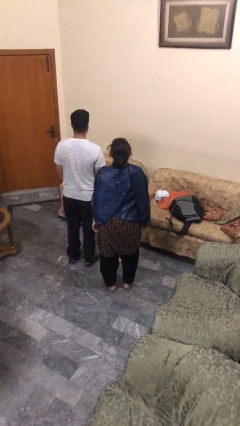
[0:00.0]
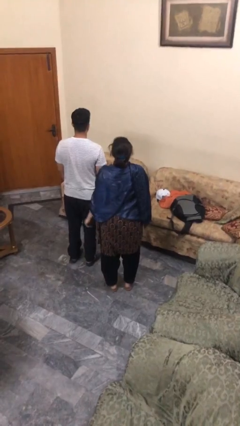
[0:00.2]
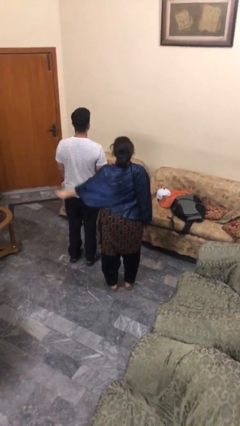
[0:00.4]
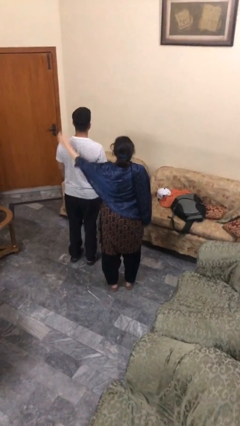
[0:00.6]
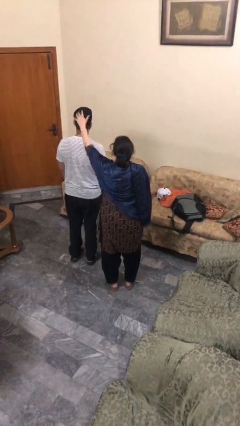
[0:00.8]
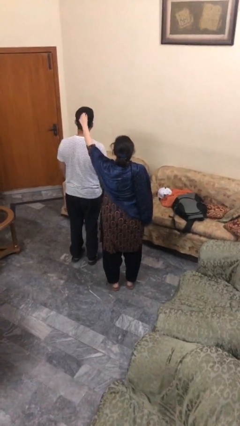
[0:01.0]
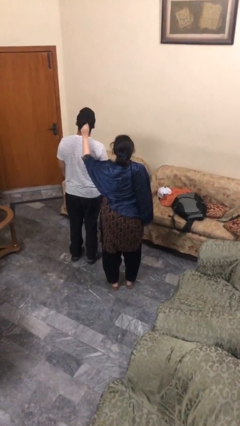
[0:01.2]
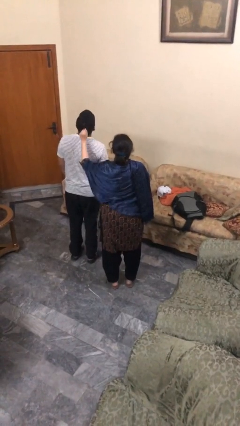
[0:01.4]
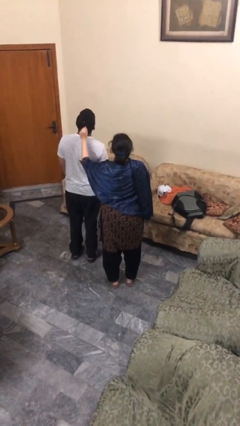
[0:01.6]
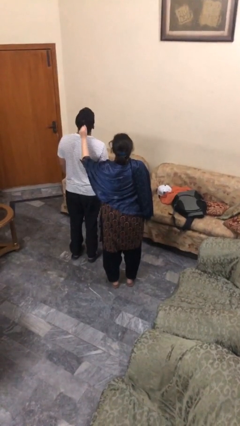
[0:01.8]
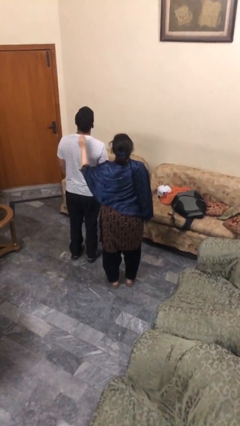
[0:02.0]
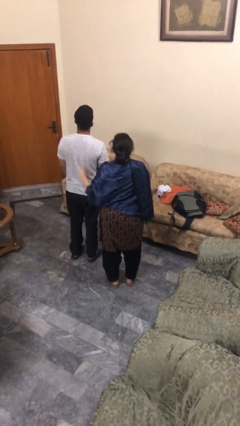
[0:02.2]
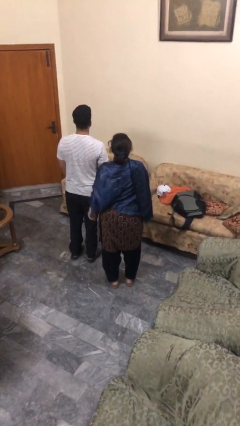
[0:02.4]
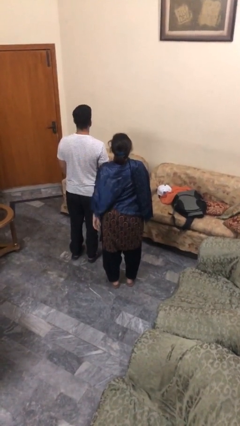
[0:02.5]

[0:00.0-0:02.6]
person grabs person by hair

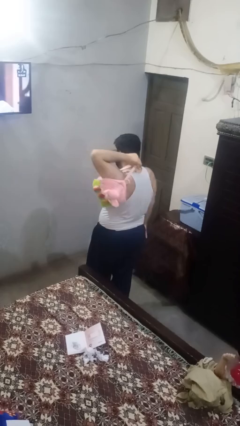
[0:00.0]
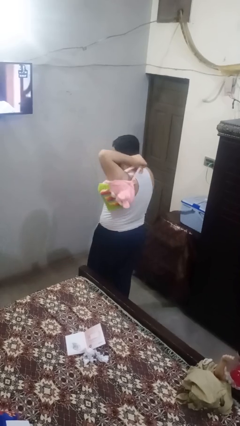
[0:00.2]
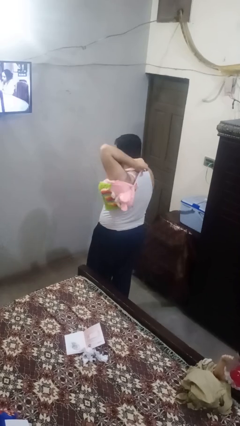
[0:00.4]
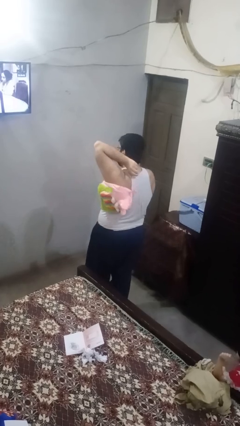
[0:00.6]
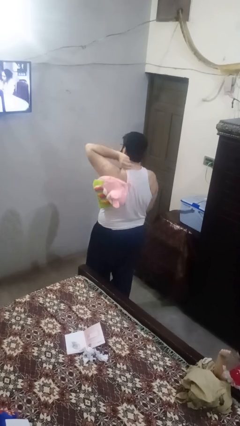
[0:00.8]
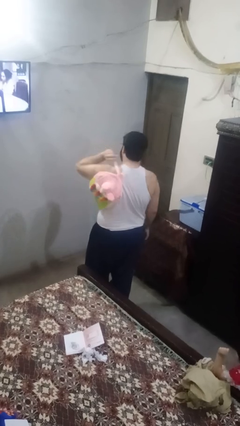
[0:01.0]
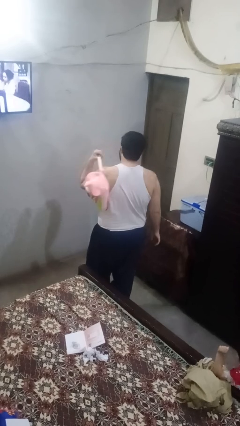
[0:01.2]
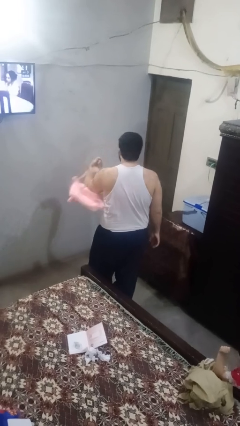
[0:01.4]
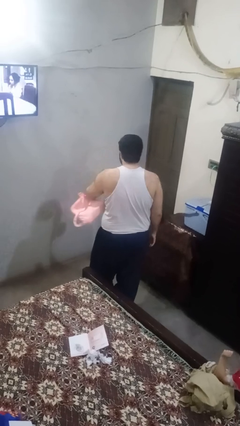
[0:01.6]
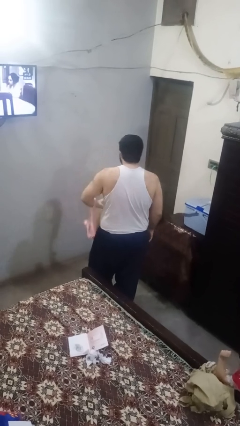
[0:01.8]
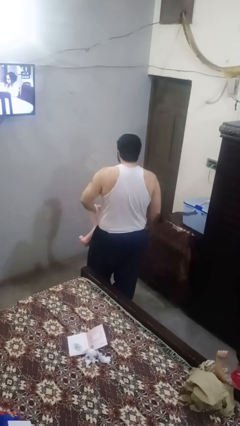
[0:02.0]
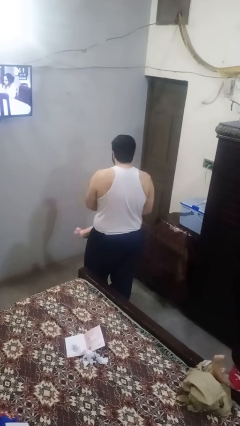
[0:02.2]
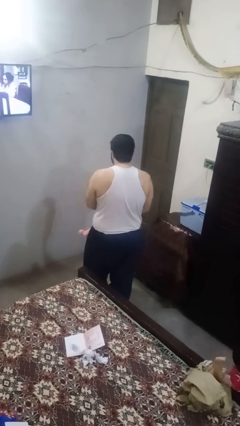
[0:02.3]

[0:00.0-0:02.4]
person takes off backpack

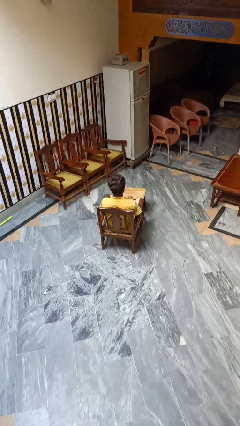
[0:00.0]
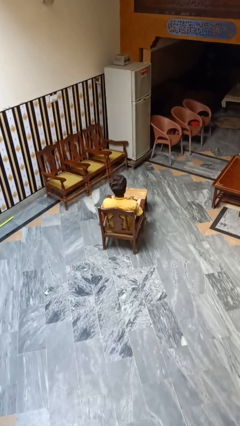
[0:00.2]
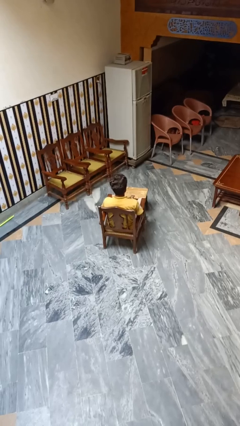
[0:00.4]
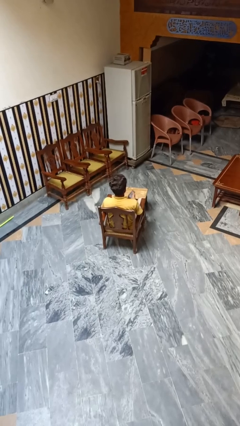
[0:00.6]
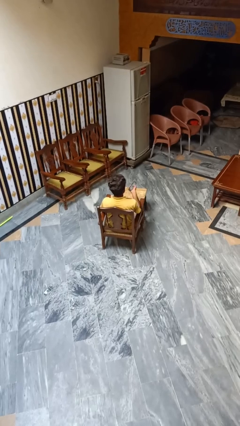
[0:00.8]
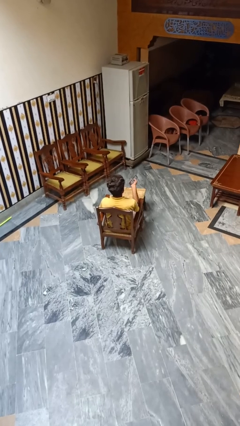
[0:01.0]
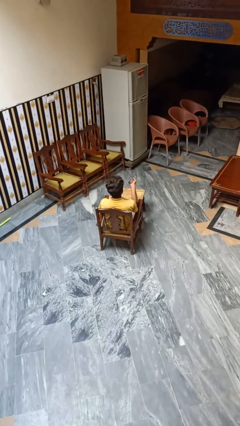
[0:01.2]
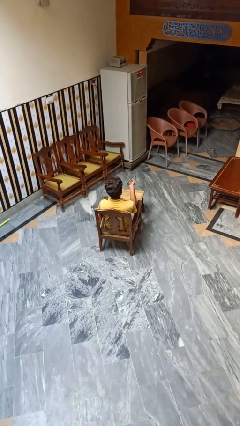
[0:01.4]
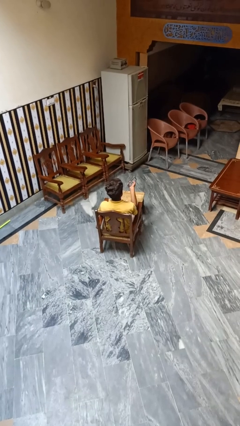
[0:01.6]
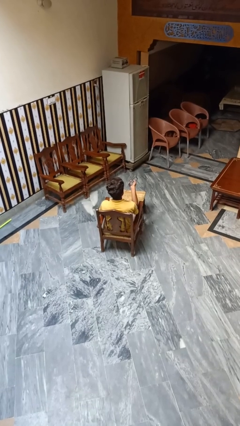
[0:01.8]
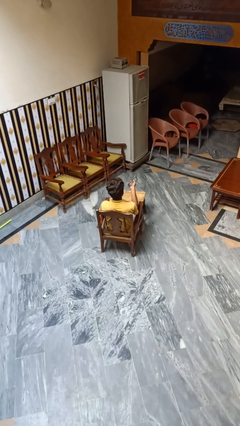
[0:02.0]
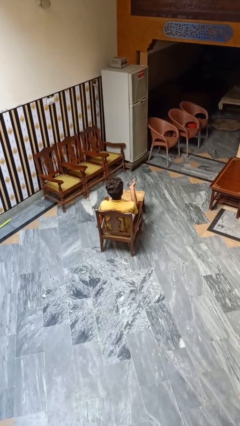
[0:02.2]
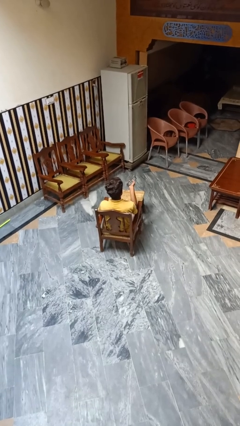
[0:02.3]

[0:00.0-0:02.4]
person uses television remote

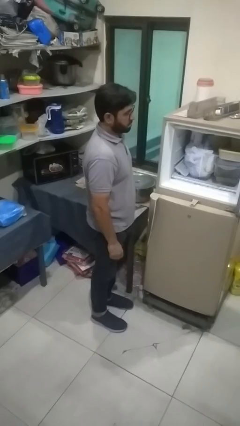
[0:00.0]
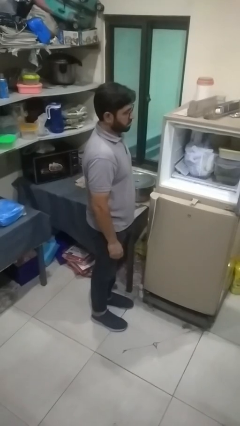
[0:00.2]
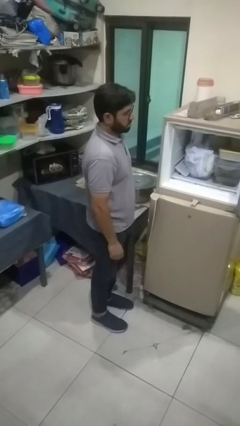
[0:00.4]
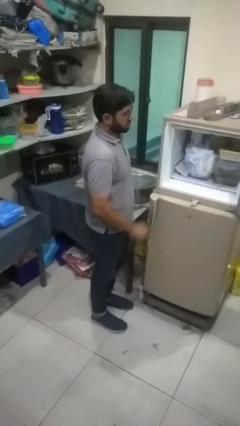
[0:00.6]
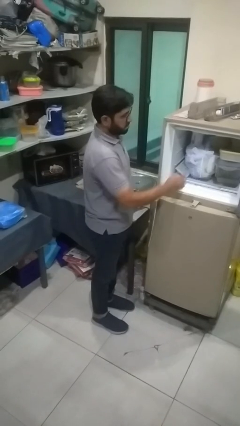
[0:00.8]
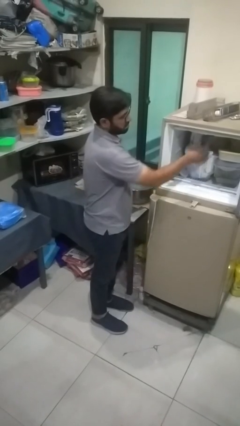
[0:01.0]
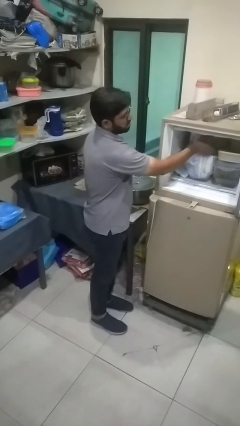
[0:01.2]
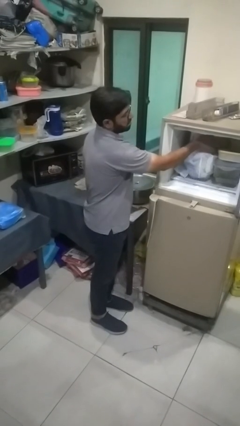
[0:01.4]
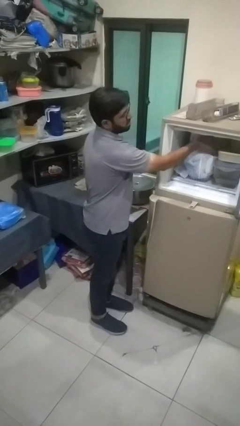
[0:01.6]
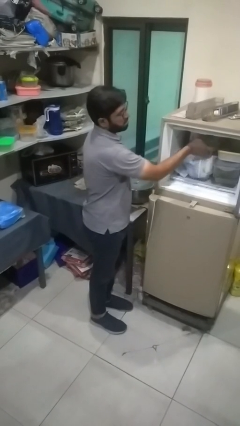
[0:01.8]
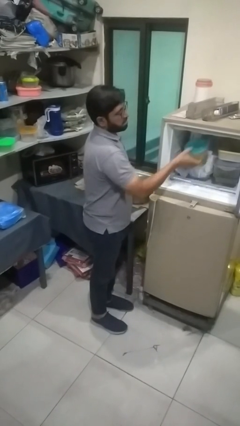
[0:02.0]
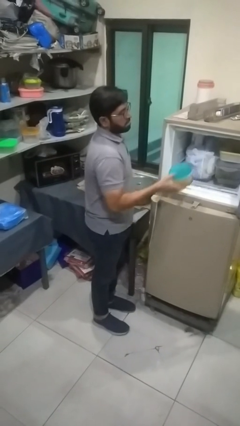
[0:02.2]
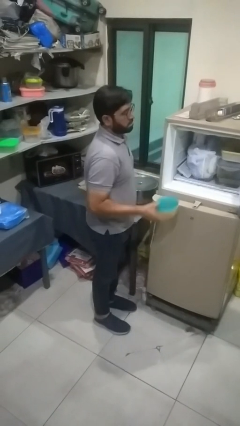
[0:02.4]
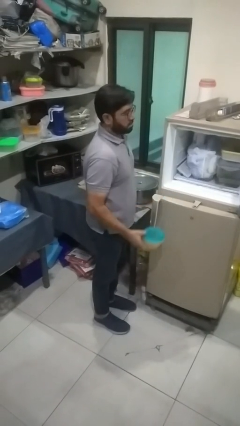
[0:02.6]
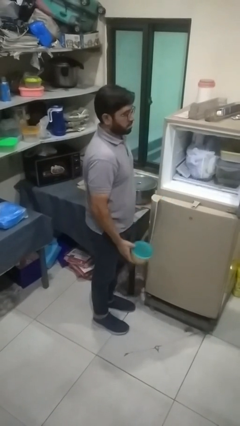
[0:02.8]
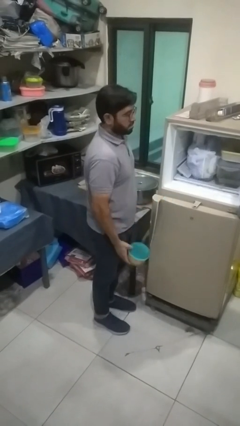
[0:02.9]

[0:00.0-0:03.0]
person takes object from refrigerator

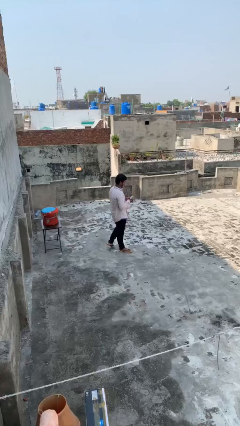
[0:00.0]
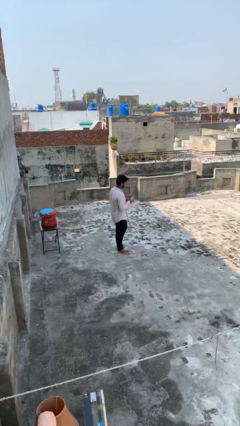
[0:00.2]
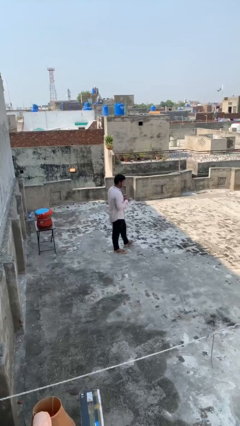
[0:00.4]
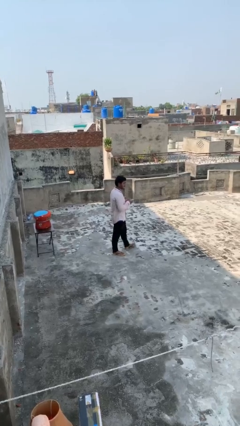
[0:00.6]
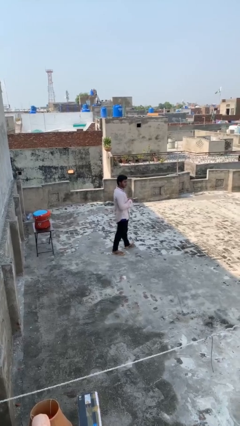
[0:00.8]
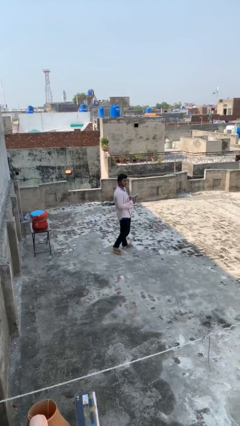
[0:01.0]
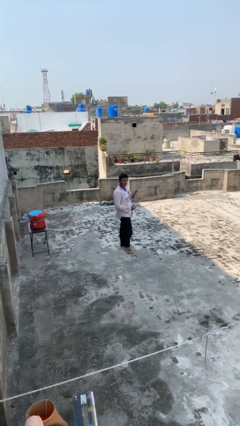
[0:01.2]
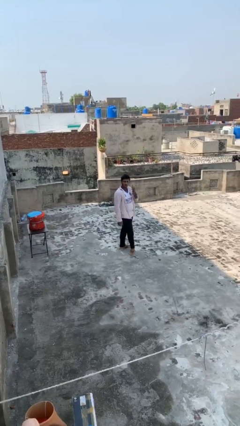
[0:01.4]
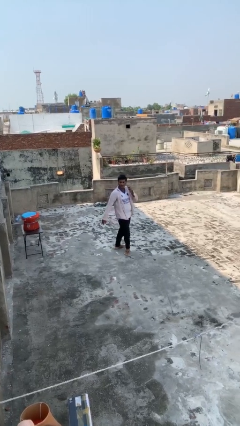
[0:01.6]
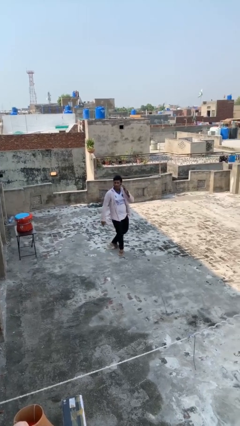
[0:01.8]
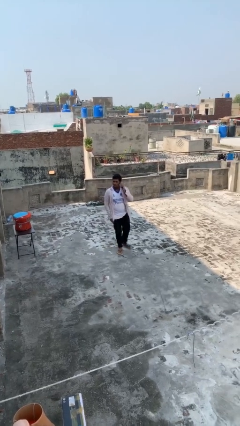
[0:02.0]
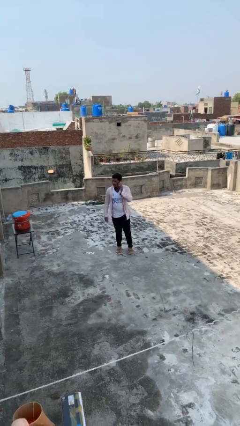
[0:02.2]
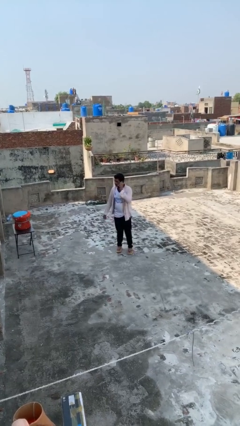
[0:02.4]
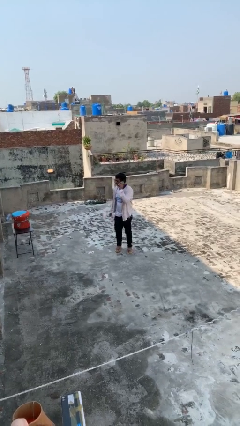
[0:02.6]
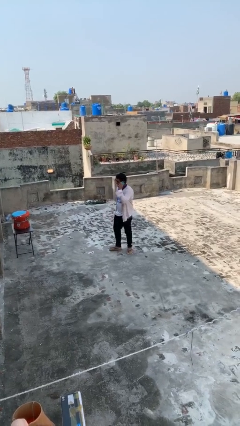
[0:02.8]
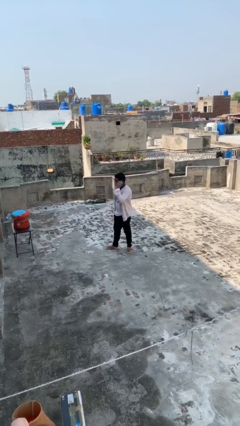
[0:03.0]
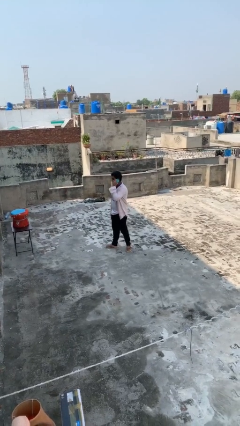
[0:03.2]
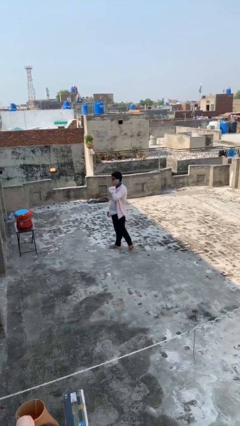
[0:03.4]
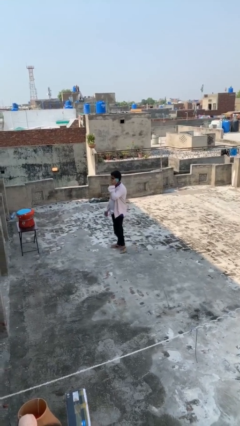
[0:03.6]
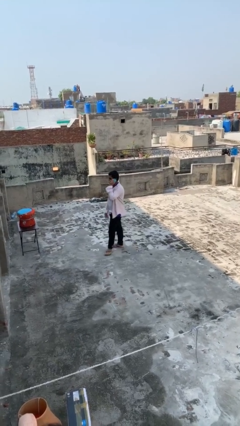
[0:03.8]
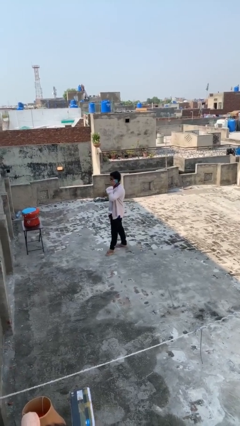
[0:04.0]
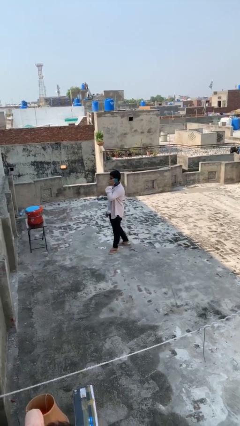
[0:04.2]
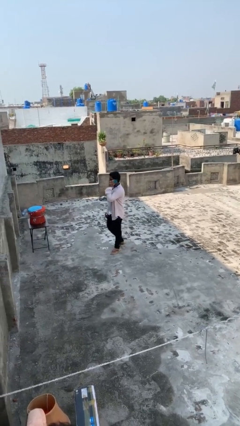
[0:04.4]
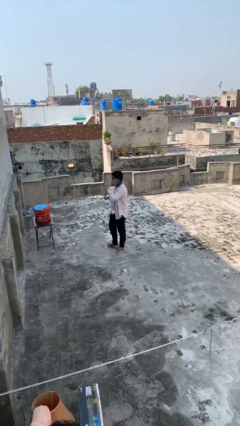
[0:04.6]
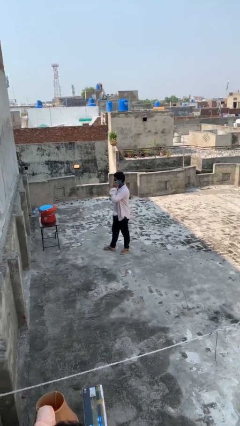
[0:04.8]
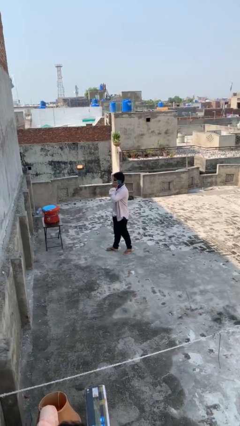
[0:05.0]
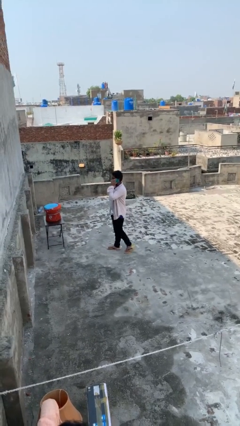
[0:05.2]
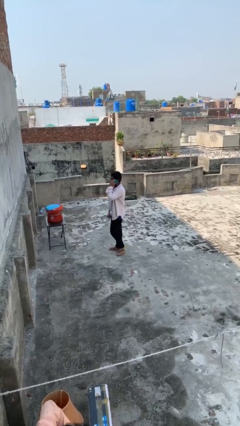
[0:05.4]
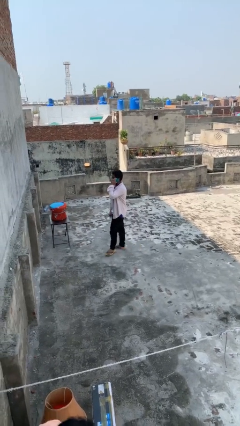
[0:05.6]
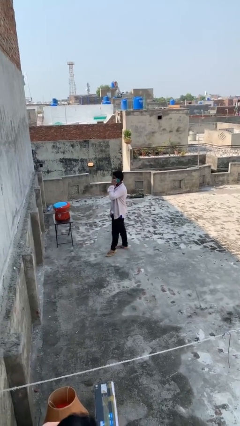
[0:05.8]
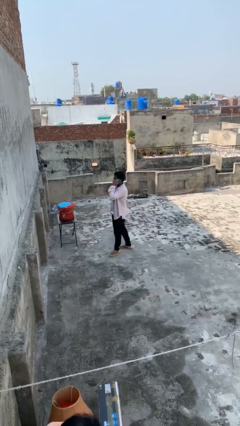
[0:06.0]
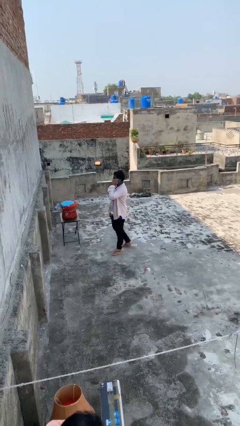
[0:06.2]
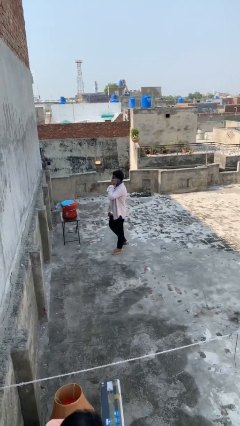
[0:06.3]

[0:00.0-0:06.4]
person talks on phone

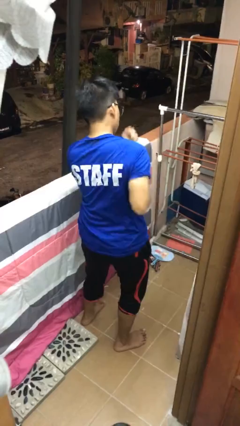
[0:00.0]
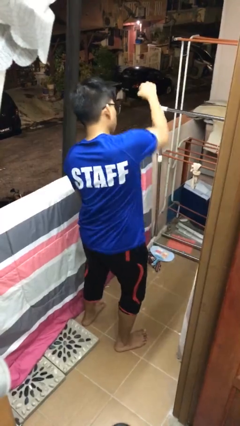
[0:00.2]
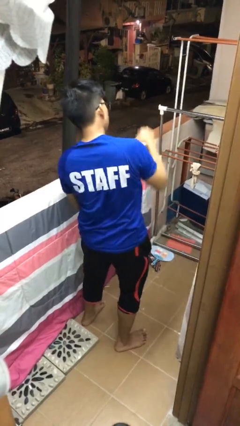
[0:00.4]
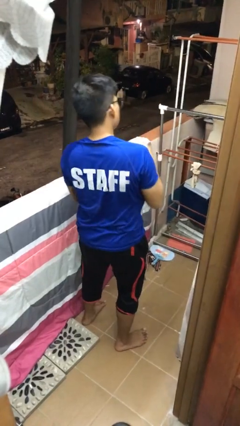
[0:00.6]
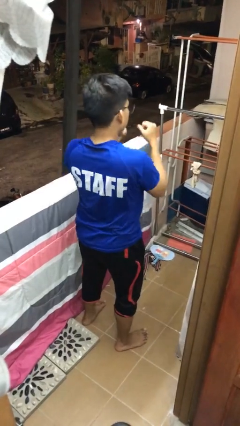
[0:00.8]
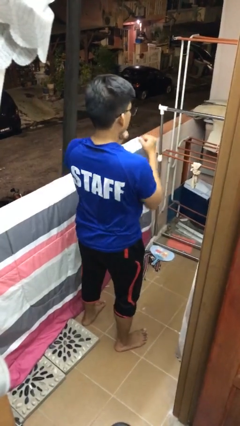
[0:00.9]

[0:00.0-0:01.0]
person punches
